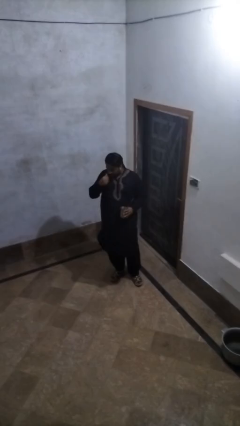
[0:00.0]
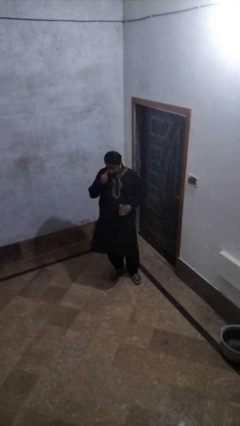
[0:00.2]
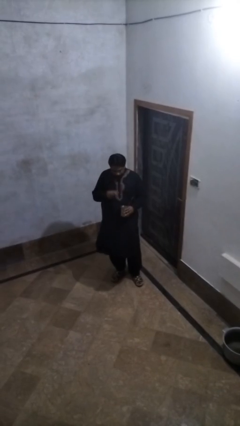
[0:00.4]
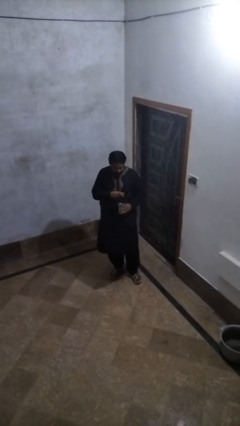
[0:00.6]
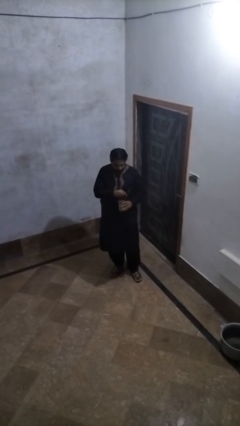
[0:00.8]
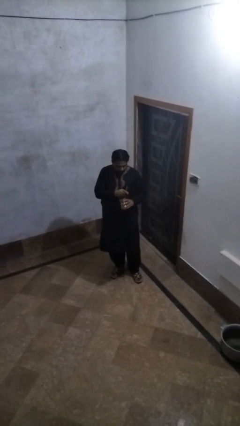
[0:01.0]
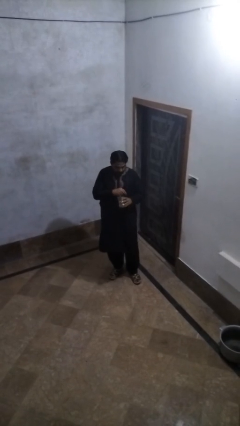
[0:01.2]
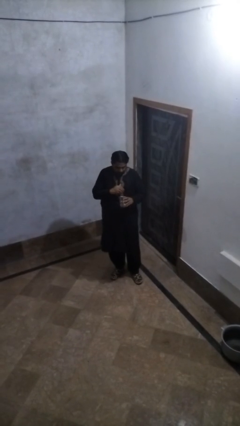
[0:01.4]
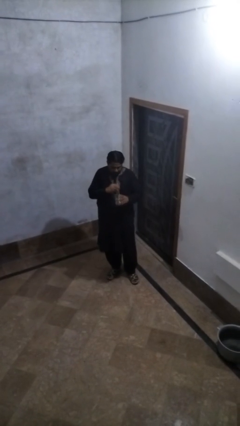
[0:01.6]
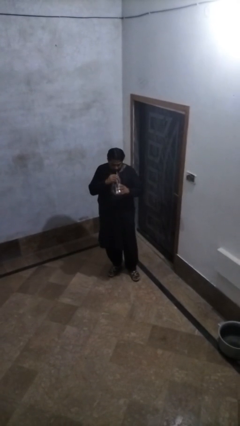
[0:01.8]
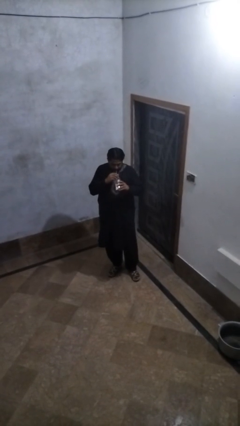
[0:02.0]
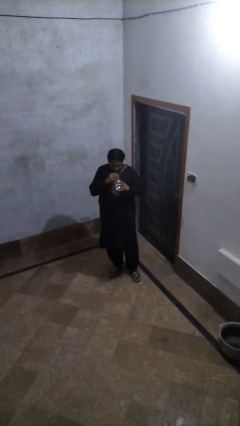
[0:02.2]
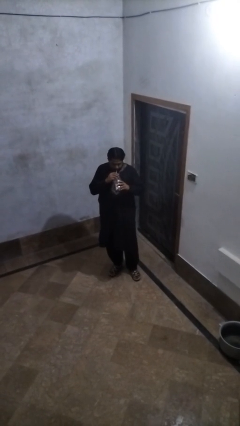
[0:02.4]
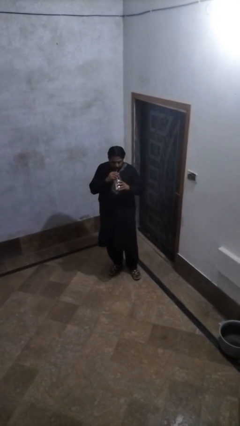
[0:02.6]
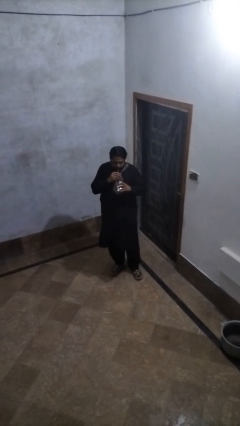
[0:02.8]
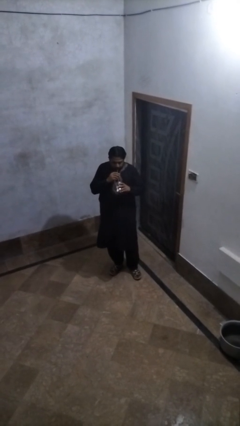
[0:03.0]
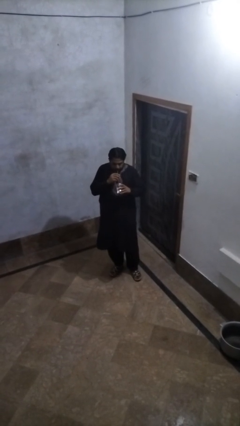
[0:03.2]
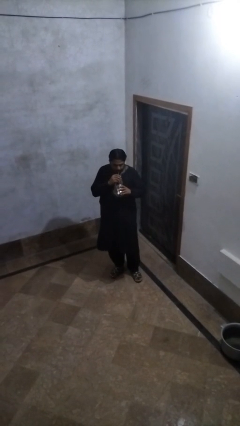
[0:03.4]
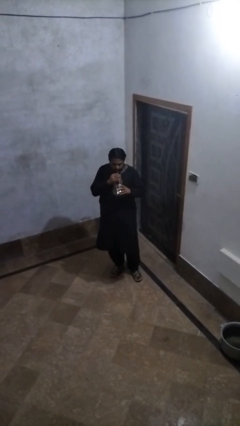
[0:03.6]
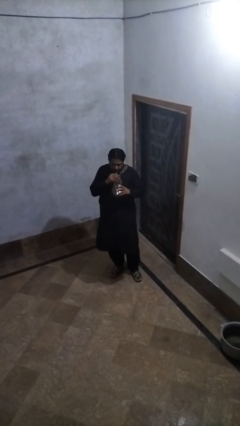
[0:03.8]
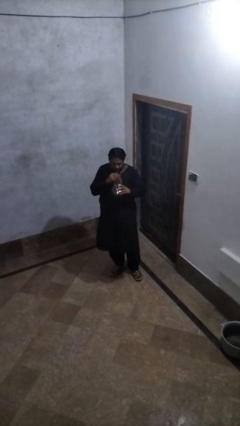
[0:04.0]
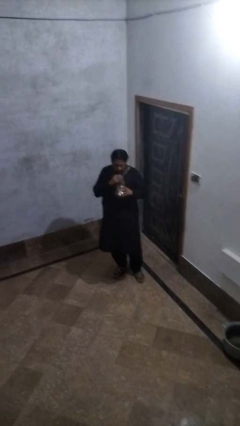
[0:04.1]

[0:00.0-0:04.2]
person drinks from straw

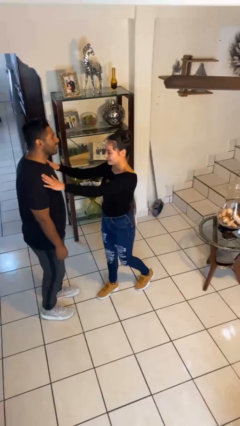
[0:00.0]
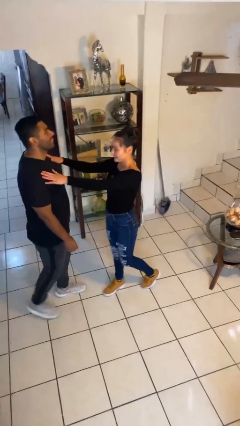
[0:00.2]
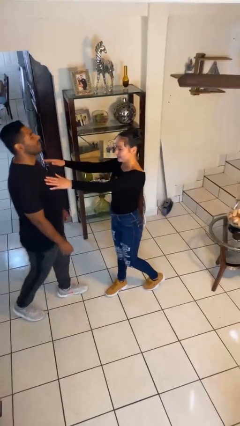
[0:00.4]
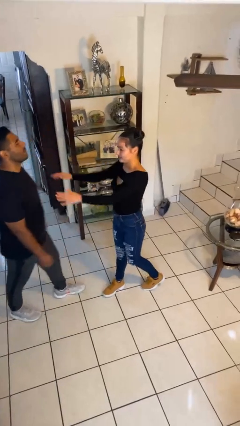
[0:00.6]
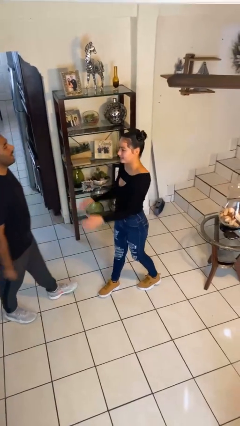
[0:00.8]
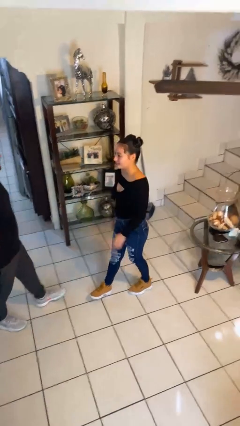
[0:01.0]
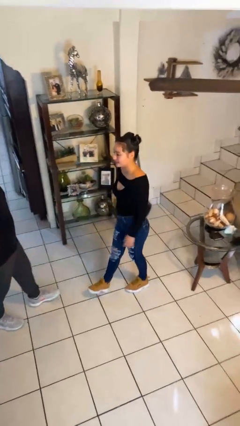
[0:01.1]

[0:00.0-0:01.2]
person shoves person

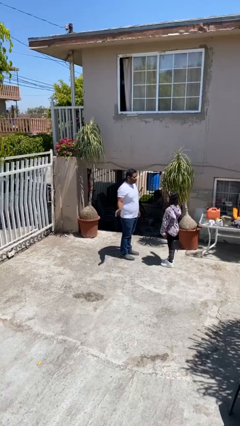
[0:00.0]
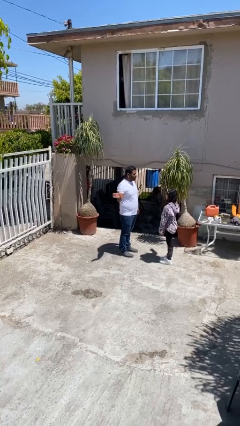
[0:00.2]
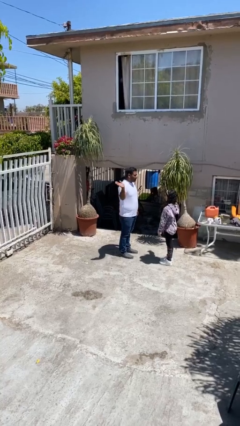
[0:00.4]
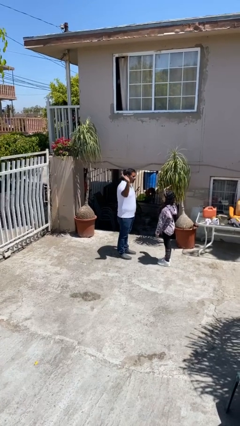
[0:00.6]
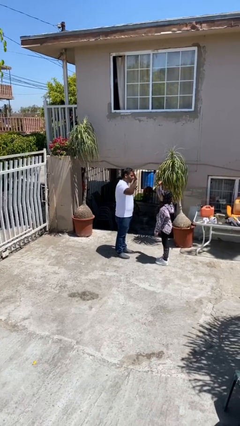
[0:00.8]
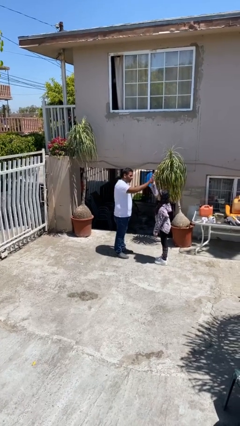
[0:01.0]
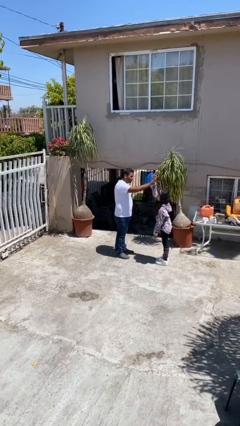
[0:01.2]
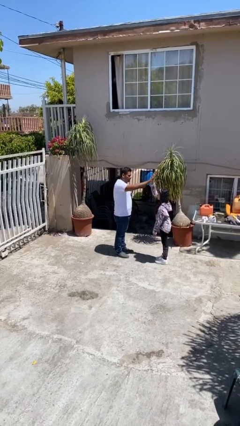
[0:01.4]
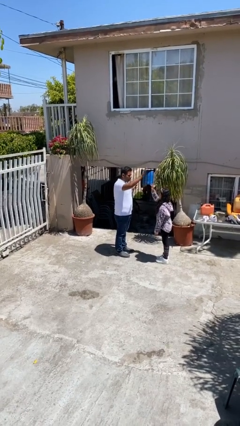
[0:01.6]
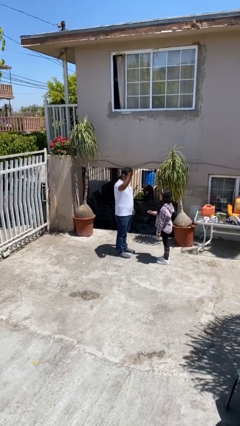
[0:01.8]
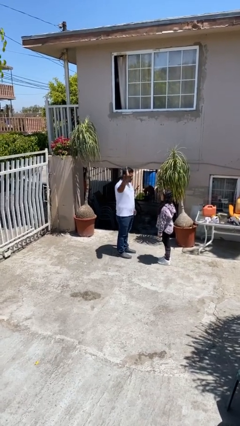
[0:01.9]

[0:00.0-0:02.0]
person highfives hand

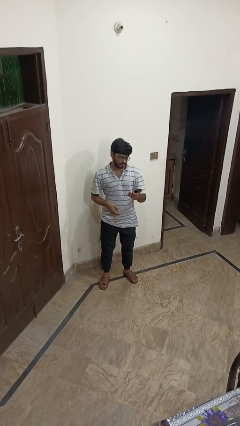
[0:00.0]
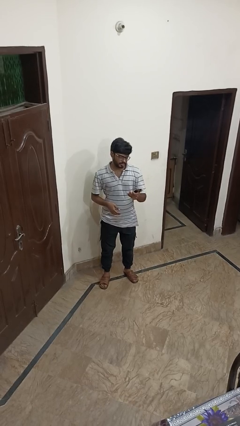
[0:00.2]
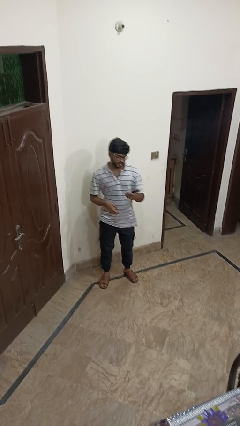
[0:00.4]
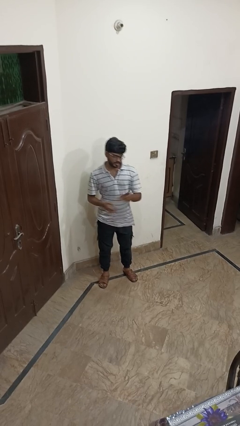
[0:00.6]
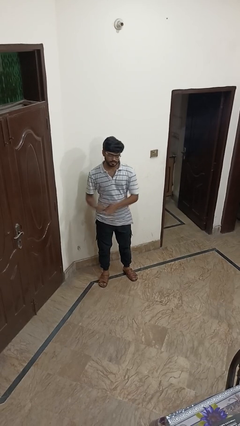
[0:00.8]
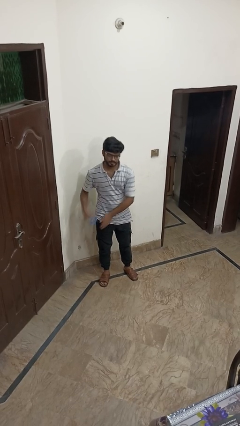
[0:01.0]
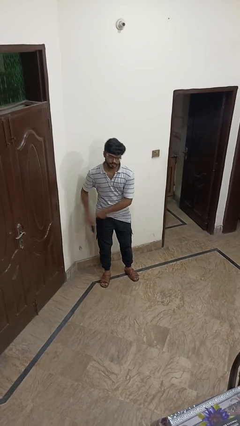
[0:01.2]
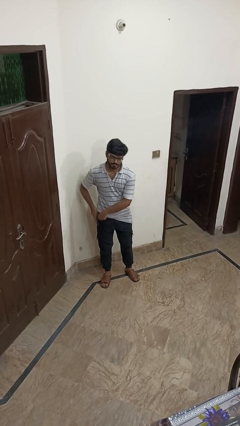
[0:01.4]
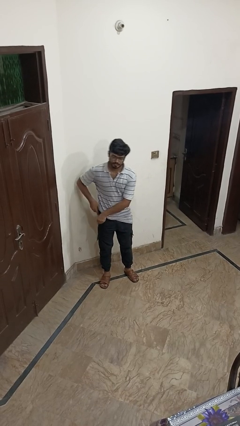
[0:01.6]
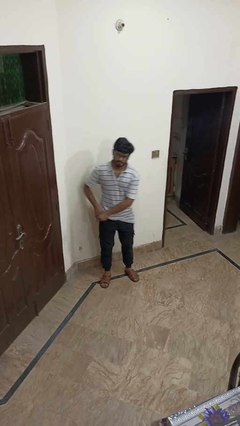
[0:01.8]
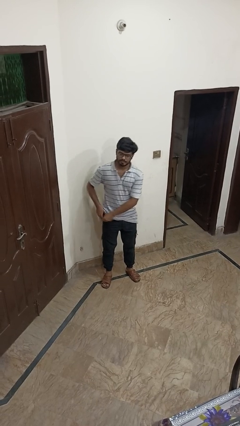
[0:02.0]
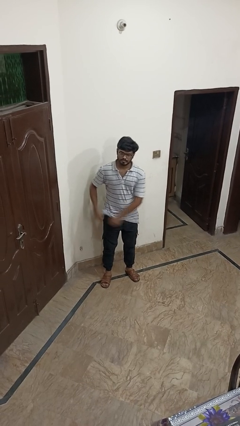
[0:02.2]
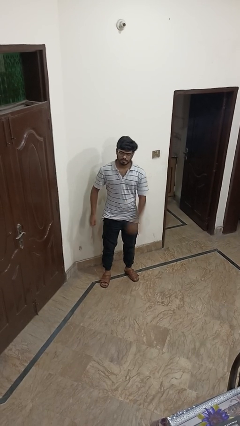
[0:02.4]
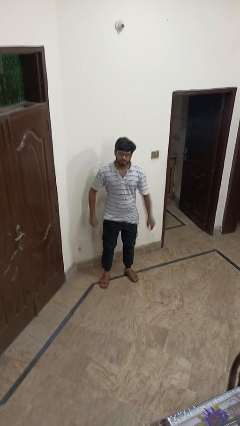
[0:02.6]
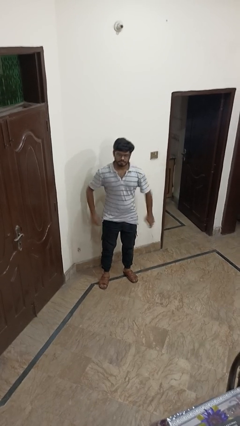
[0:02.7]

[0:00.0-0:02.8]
person puts phone into pocket

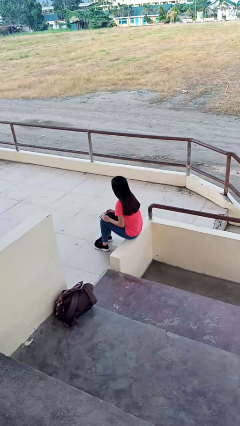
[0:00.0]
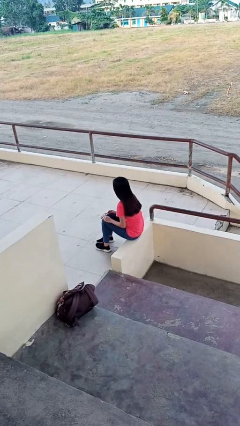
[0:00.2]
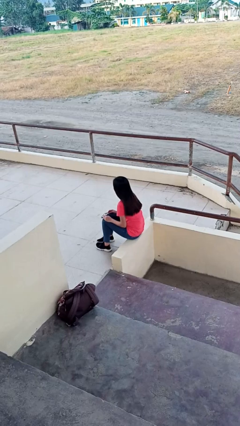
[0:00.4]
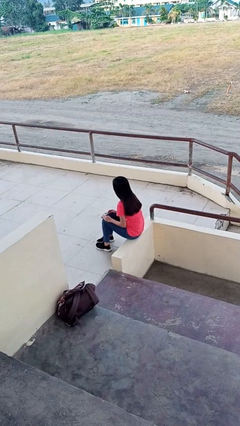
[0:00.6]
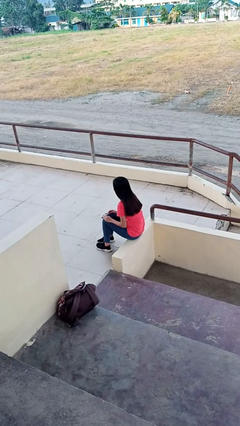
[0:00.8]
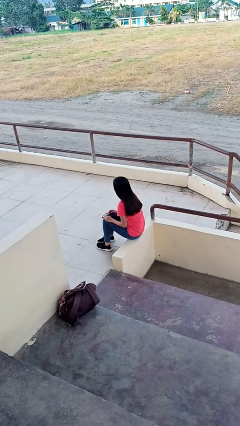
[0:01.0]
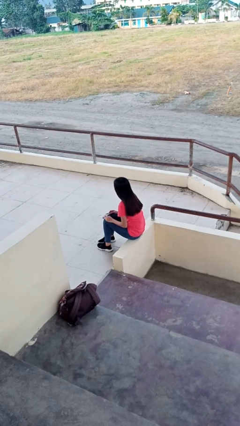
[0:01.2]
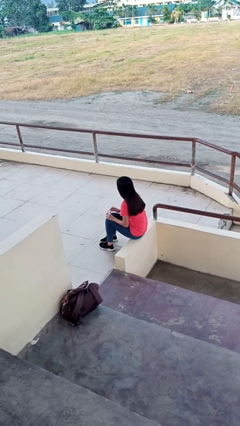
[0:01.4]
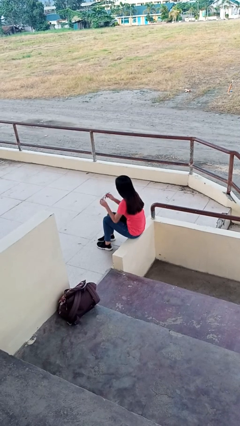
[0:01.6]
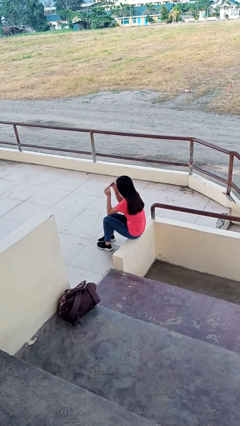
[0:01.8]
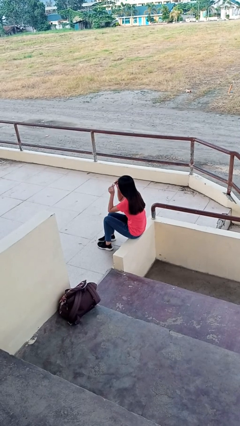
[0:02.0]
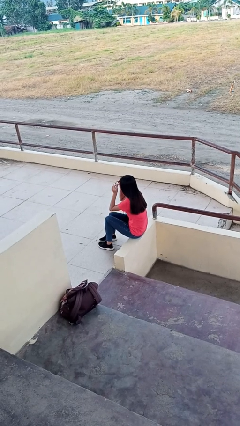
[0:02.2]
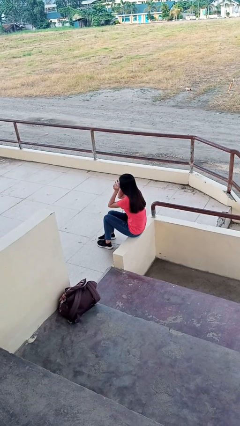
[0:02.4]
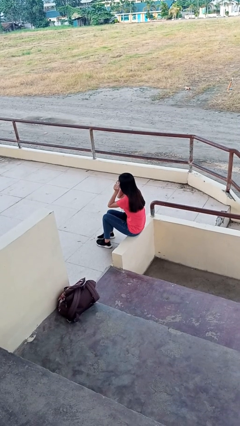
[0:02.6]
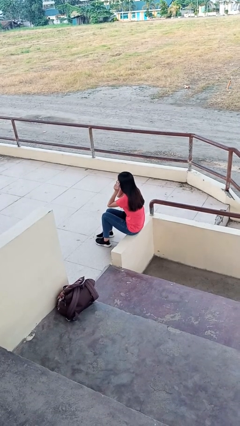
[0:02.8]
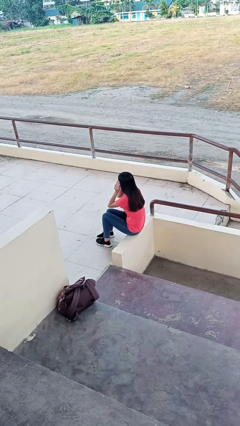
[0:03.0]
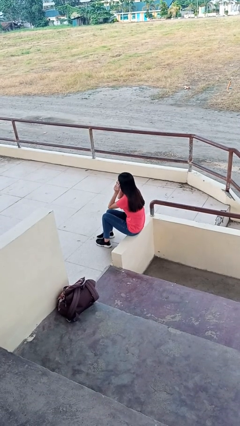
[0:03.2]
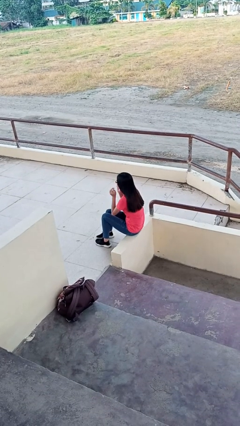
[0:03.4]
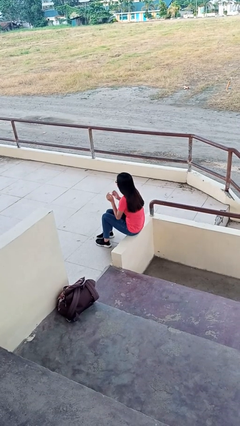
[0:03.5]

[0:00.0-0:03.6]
person puts on glasses

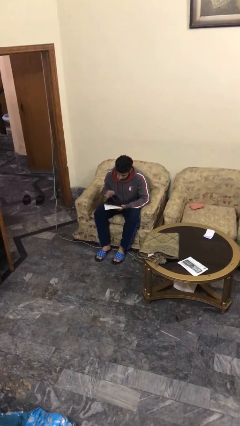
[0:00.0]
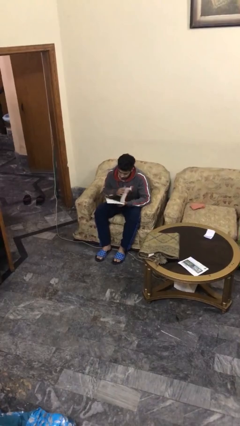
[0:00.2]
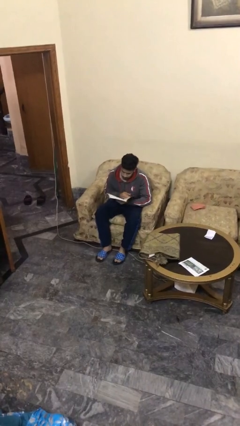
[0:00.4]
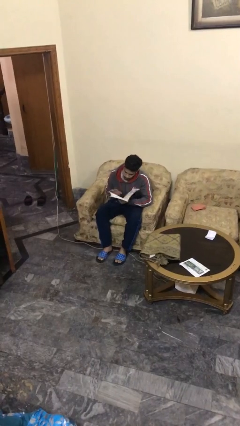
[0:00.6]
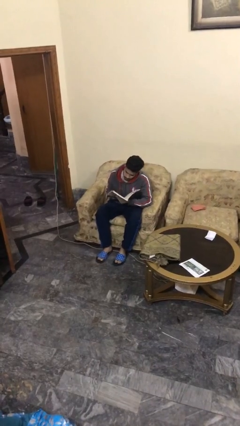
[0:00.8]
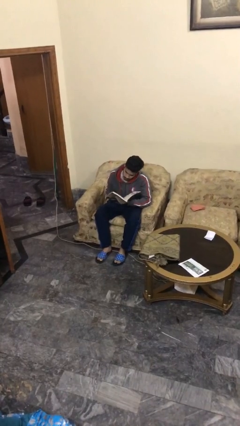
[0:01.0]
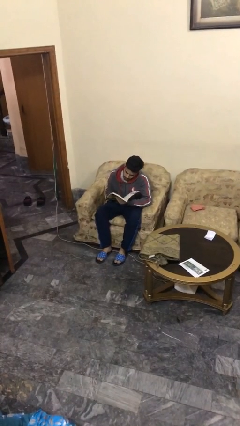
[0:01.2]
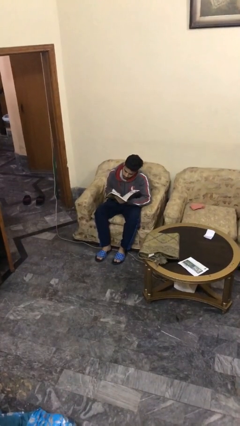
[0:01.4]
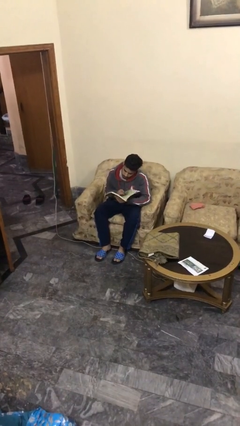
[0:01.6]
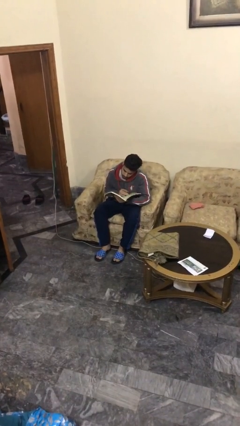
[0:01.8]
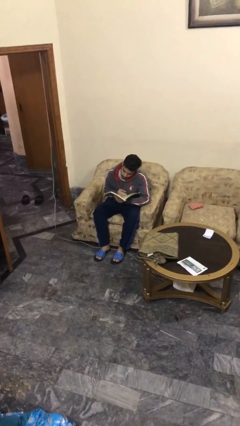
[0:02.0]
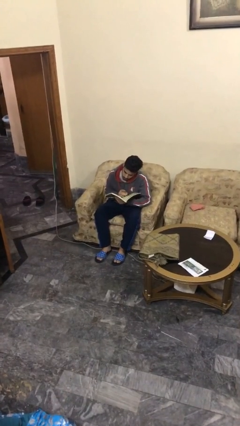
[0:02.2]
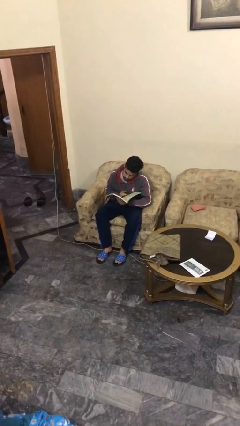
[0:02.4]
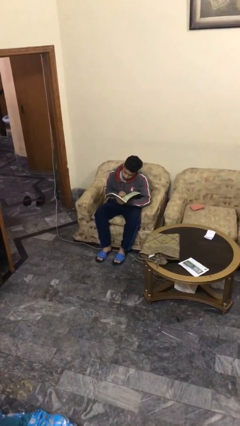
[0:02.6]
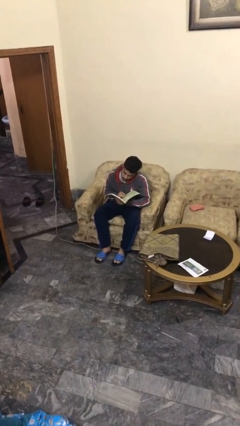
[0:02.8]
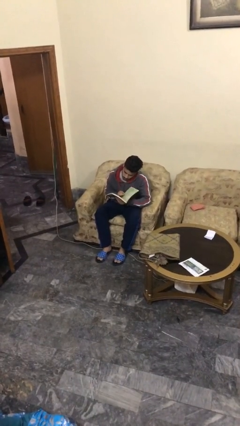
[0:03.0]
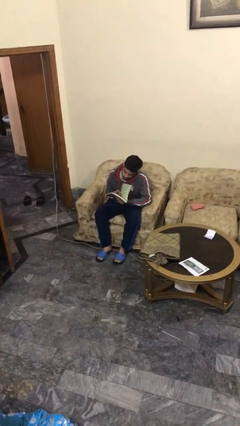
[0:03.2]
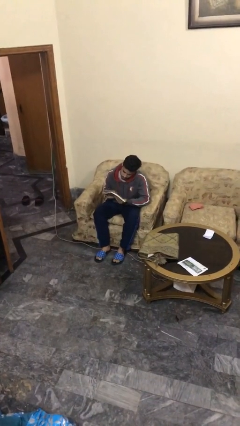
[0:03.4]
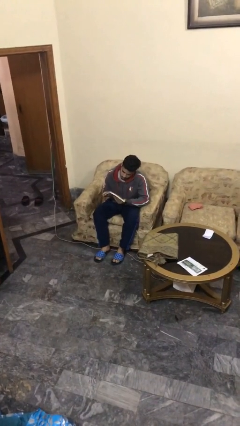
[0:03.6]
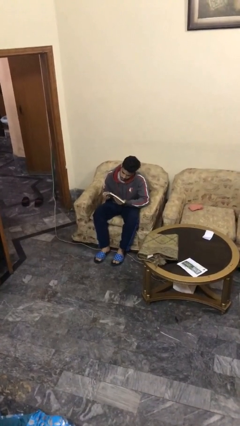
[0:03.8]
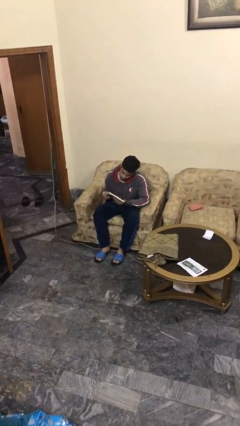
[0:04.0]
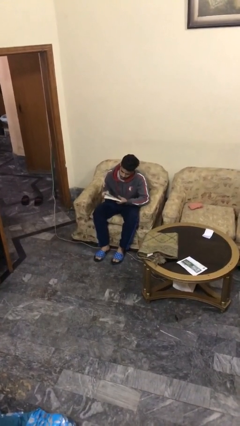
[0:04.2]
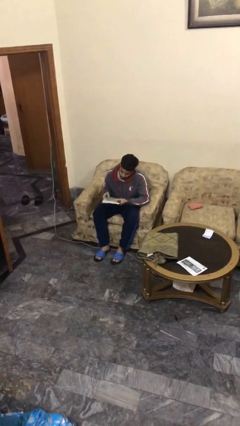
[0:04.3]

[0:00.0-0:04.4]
person reads document
